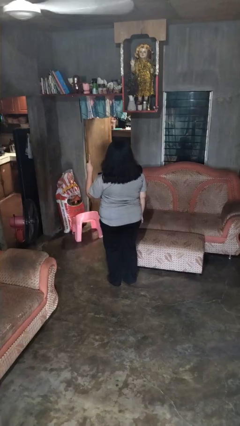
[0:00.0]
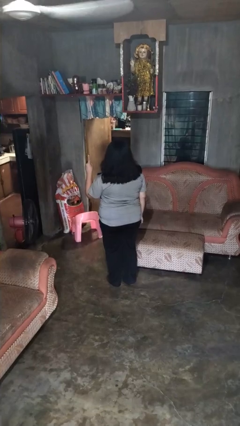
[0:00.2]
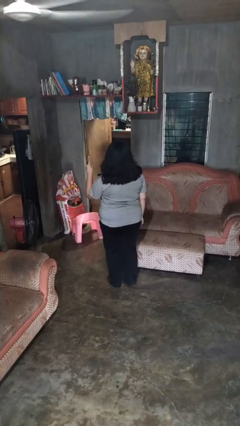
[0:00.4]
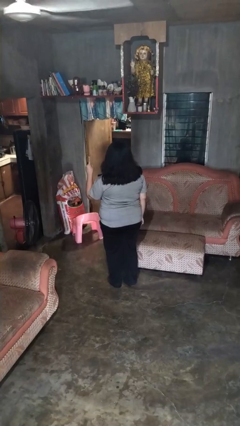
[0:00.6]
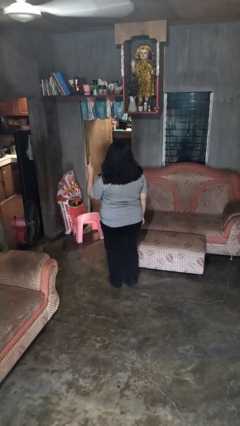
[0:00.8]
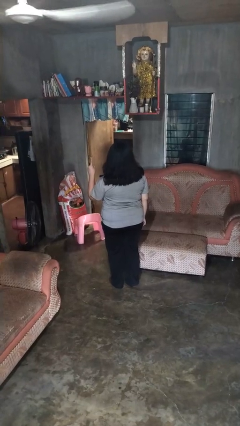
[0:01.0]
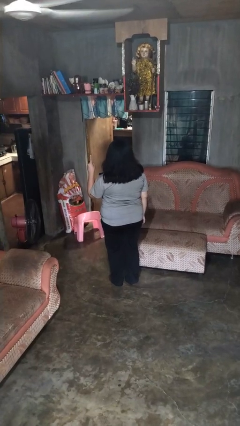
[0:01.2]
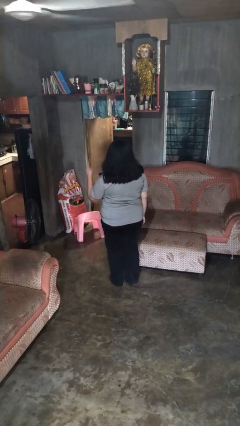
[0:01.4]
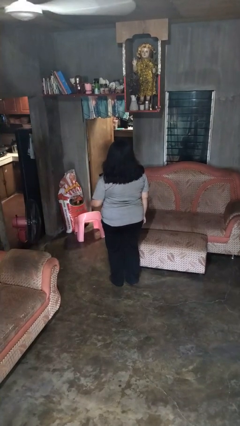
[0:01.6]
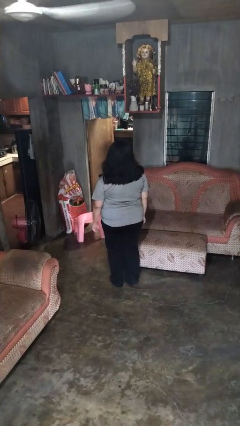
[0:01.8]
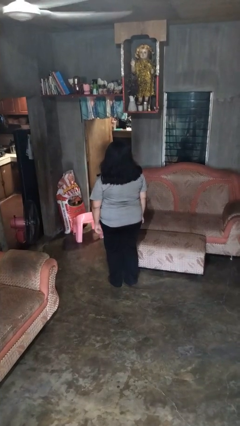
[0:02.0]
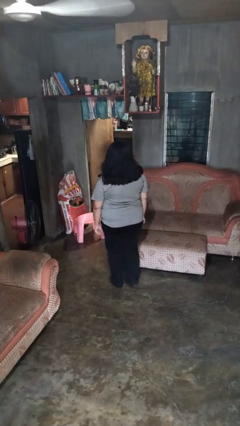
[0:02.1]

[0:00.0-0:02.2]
person gestures number one

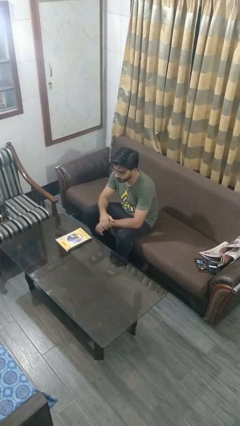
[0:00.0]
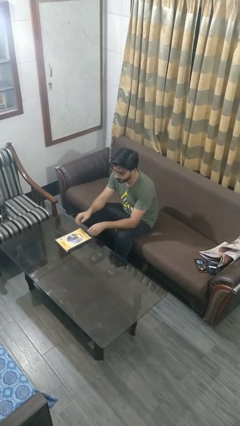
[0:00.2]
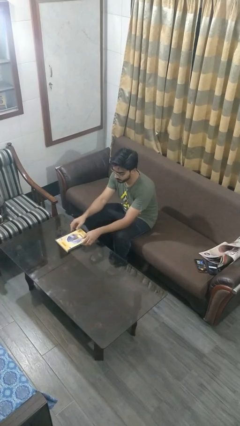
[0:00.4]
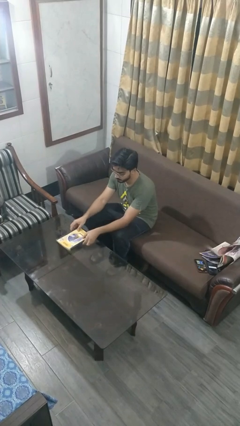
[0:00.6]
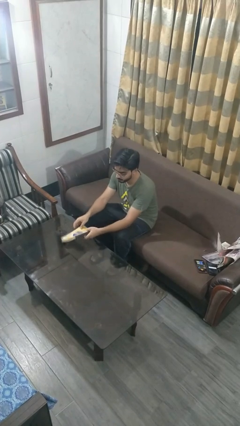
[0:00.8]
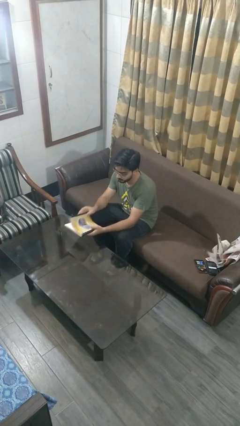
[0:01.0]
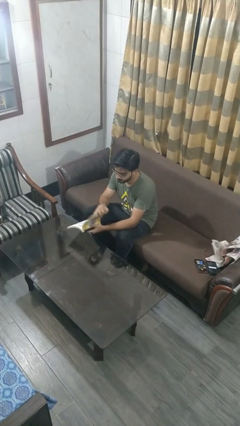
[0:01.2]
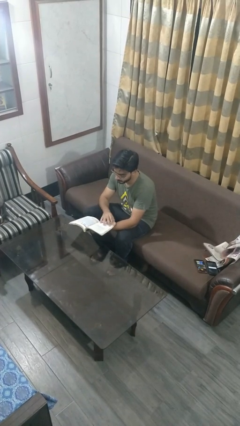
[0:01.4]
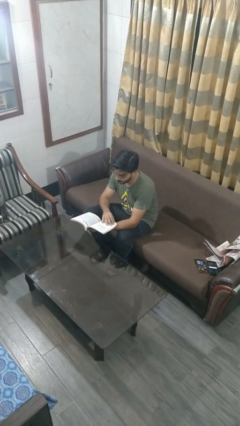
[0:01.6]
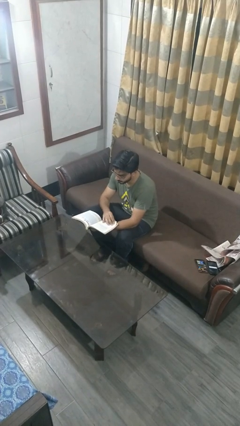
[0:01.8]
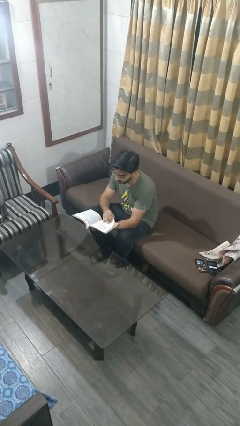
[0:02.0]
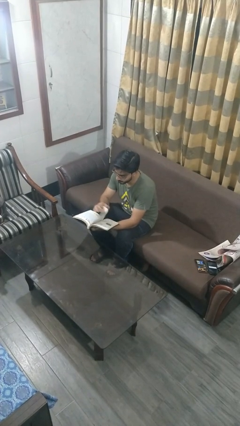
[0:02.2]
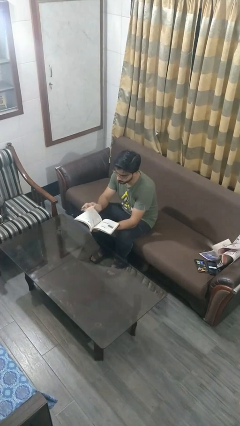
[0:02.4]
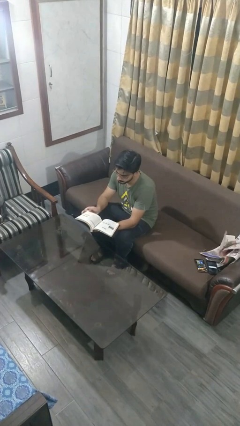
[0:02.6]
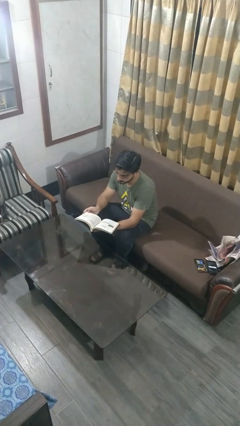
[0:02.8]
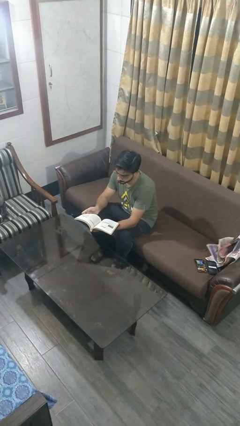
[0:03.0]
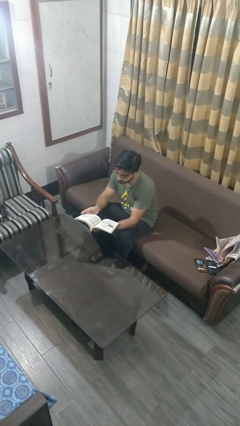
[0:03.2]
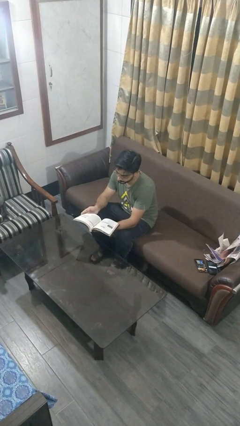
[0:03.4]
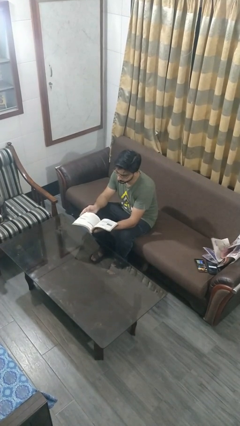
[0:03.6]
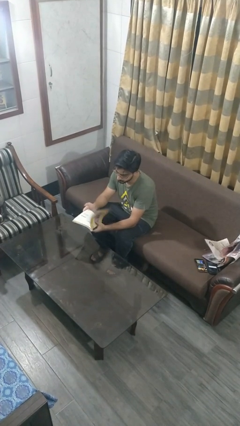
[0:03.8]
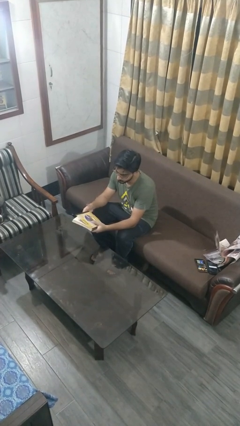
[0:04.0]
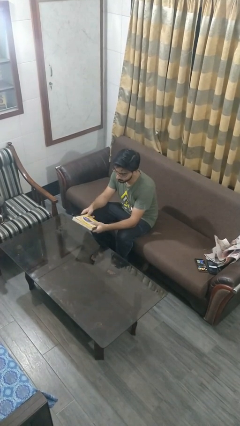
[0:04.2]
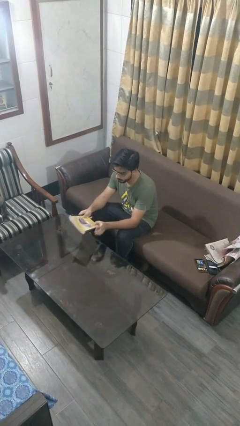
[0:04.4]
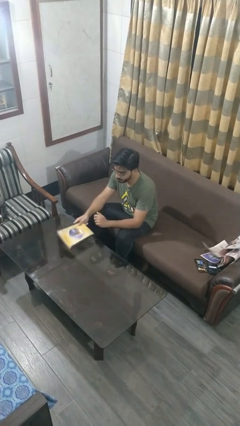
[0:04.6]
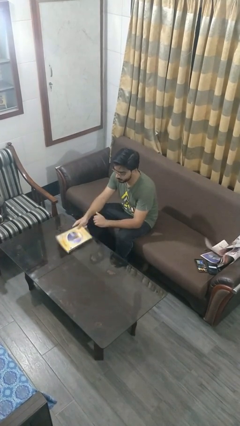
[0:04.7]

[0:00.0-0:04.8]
person reads book

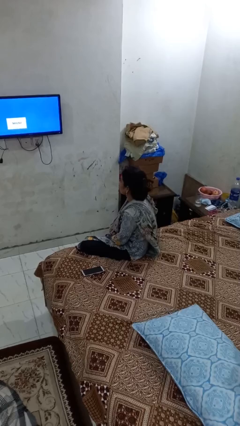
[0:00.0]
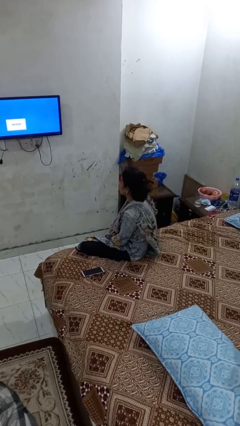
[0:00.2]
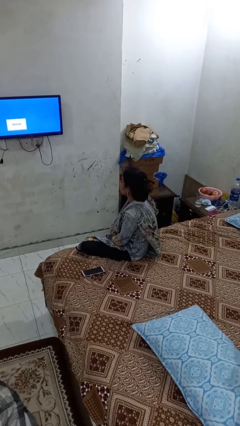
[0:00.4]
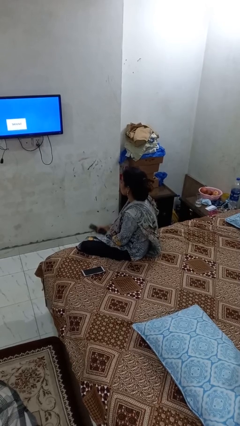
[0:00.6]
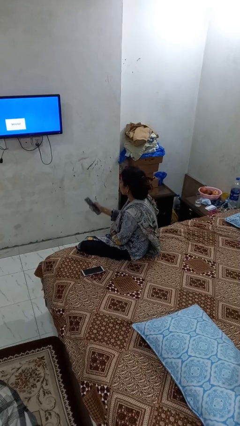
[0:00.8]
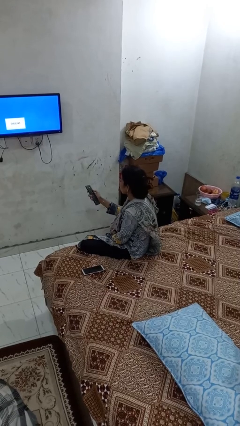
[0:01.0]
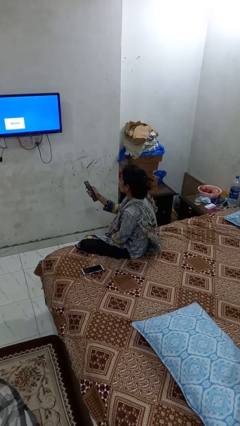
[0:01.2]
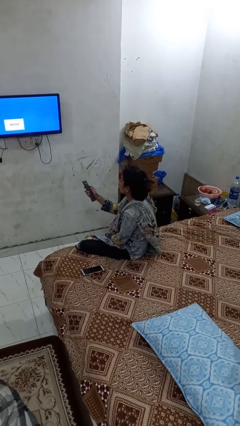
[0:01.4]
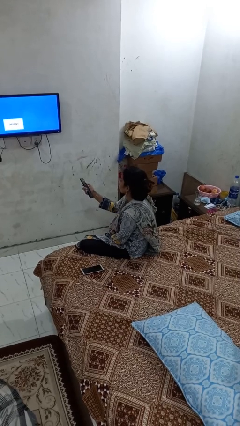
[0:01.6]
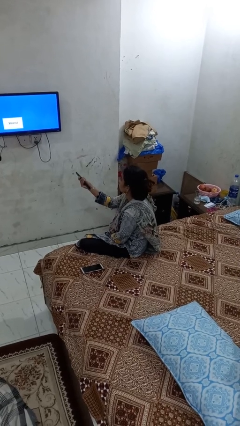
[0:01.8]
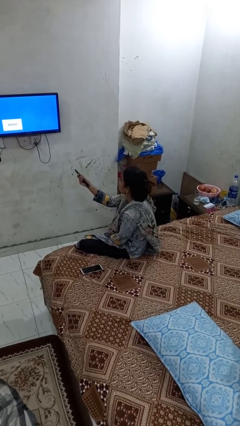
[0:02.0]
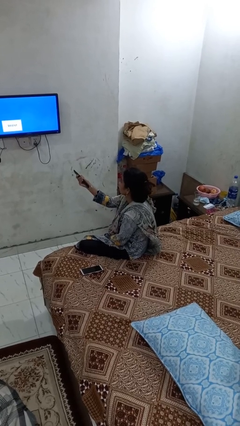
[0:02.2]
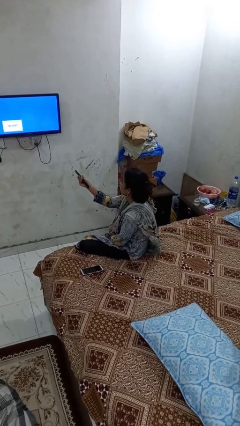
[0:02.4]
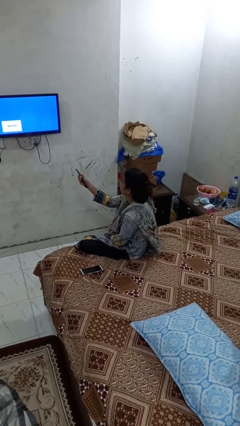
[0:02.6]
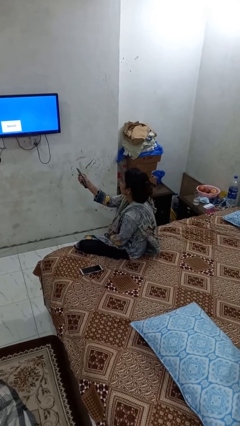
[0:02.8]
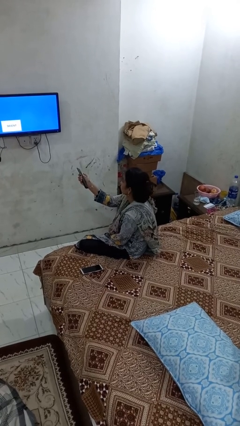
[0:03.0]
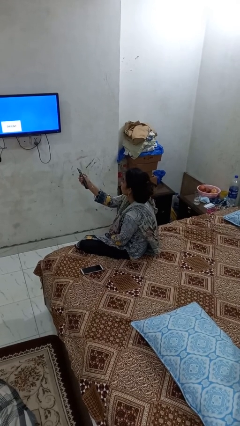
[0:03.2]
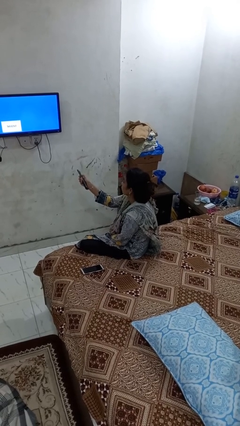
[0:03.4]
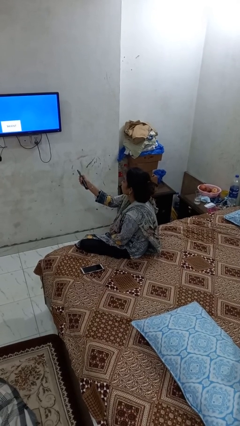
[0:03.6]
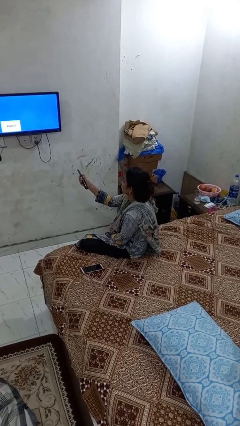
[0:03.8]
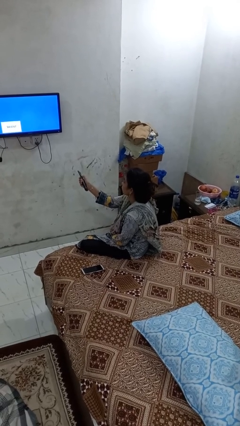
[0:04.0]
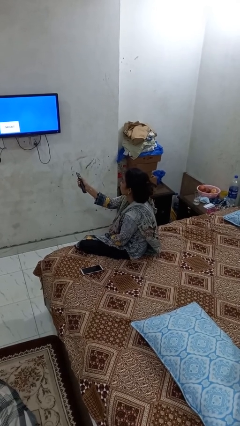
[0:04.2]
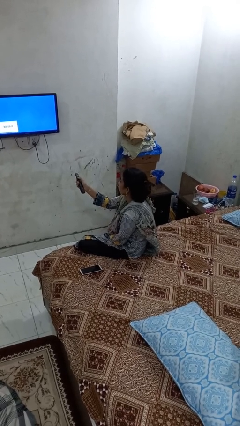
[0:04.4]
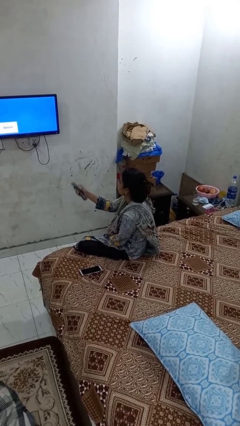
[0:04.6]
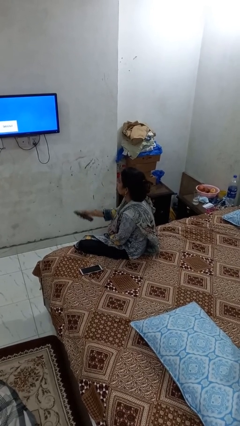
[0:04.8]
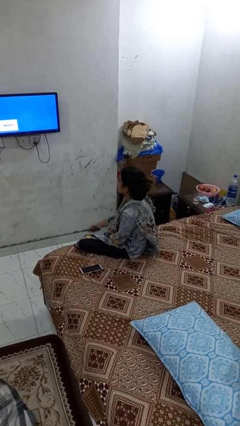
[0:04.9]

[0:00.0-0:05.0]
person uses television remote

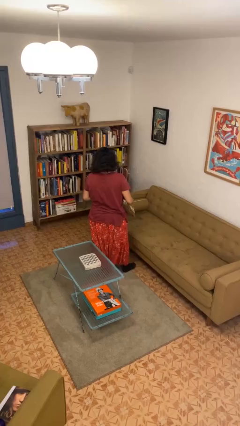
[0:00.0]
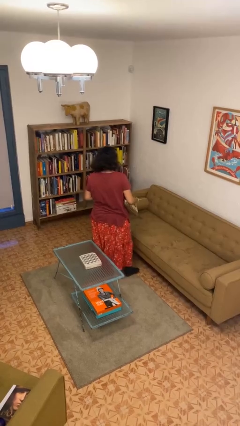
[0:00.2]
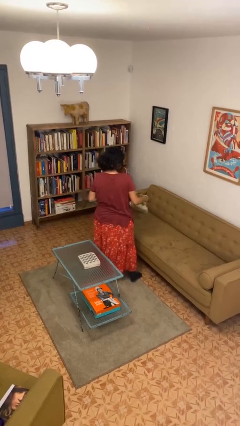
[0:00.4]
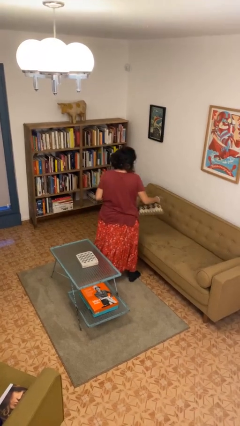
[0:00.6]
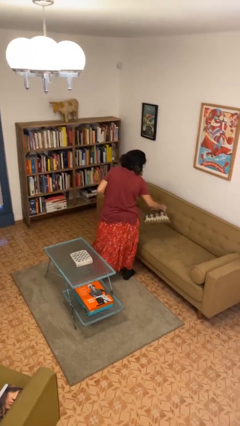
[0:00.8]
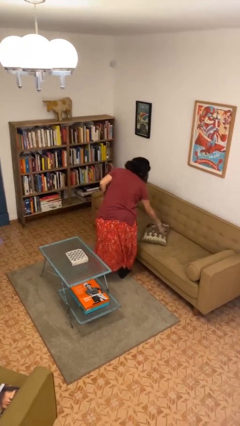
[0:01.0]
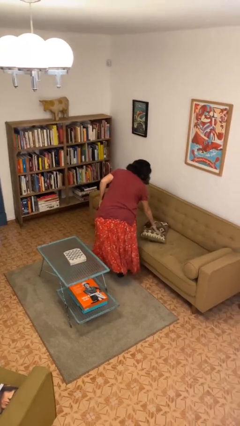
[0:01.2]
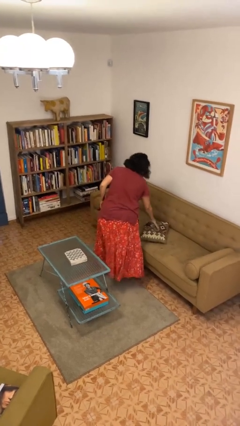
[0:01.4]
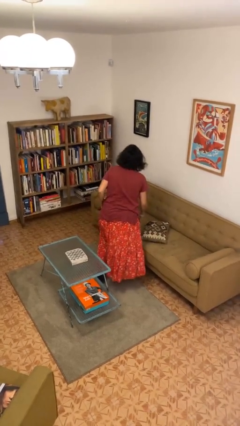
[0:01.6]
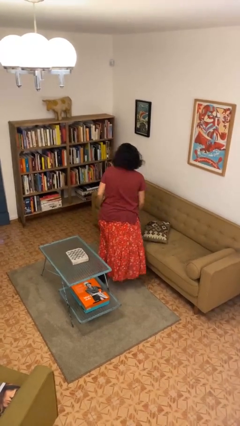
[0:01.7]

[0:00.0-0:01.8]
person puts down object on couch

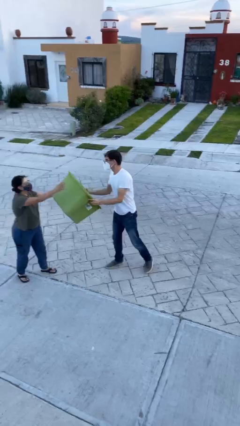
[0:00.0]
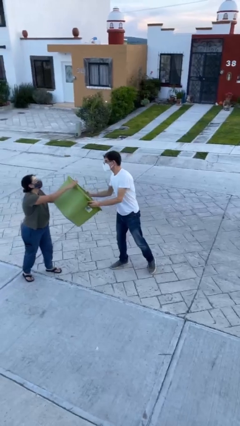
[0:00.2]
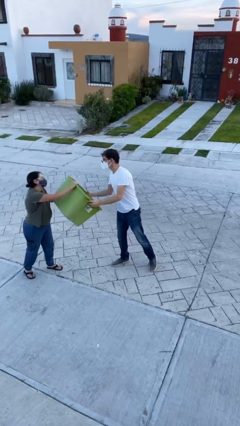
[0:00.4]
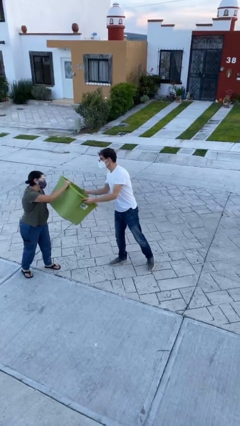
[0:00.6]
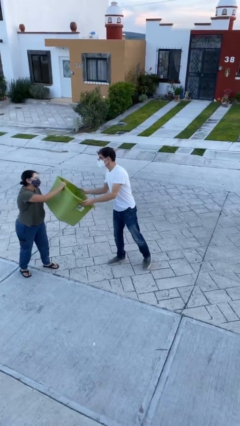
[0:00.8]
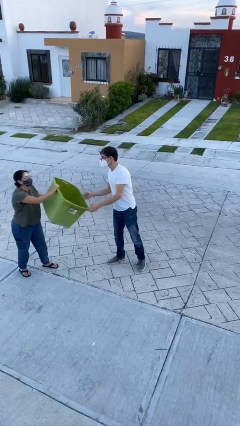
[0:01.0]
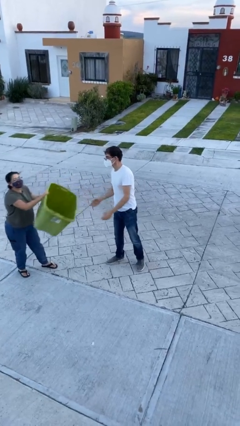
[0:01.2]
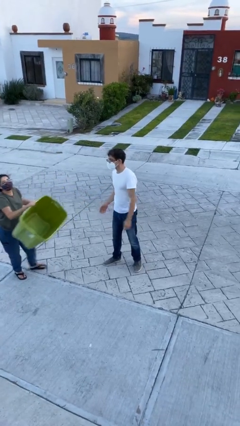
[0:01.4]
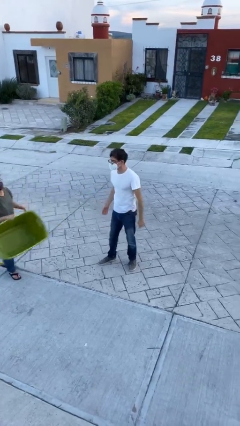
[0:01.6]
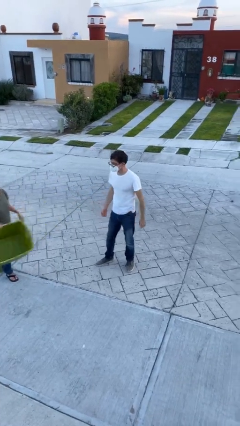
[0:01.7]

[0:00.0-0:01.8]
person transfers object to person

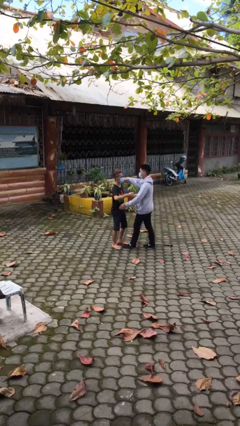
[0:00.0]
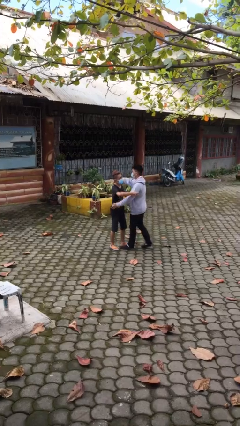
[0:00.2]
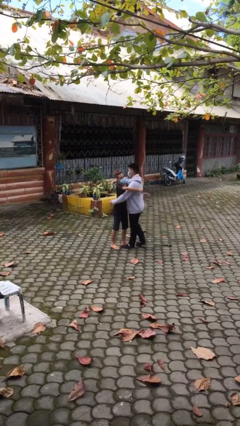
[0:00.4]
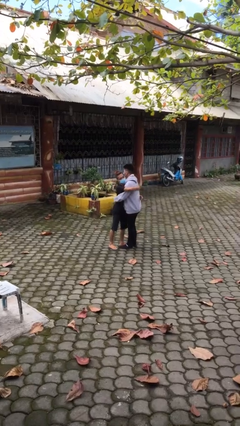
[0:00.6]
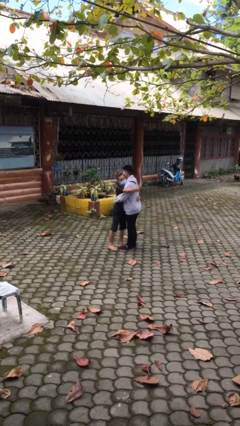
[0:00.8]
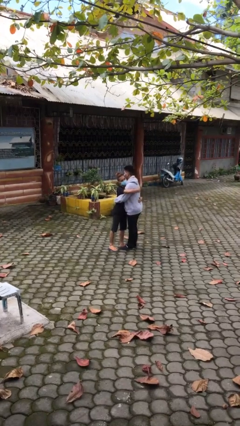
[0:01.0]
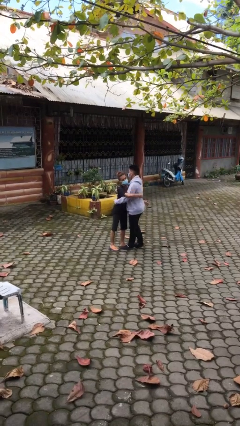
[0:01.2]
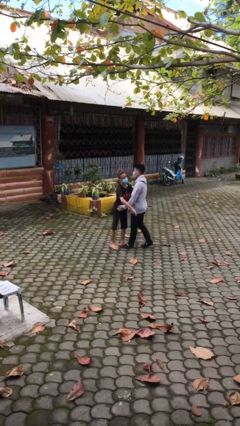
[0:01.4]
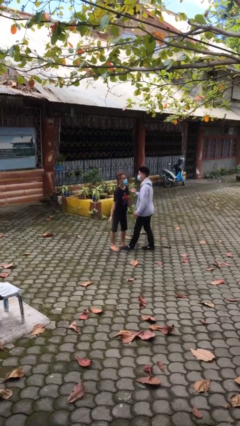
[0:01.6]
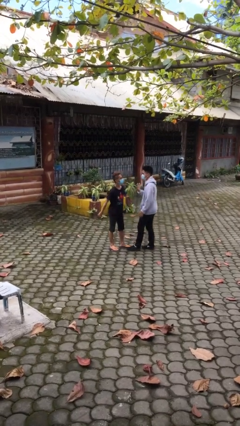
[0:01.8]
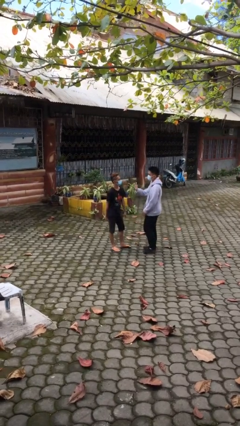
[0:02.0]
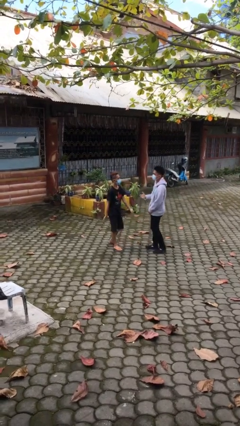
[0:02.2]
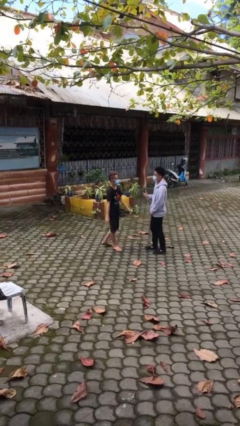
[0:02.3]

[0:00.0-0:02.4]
person embraces person
